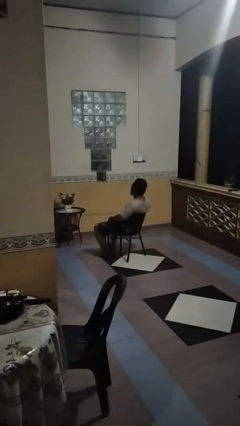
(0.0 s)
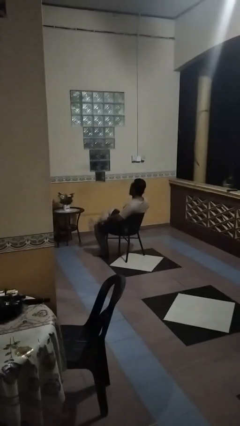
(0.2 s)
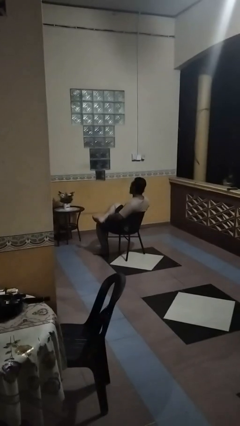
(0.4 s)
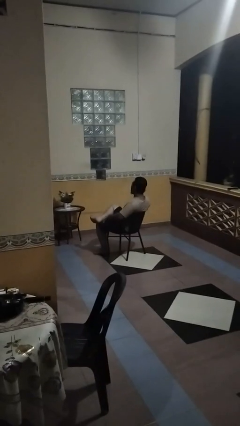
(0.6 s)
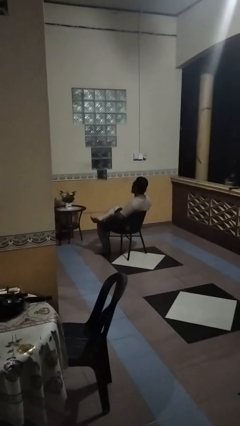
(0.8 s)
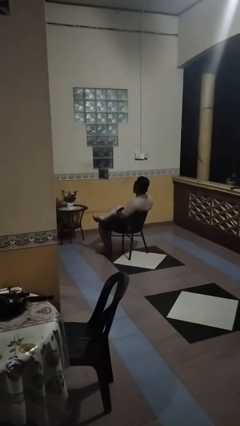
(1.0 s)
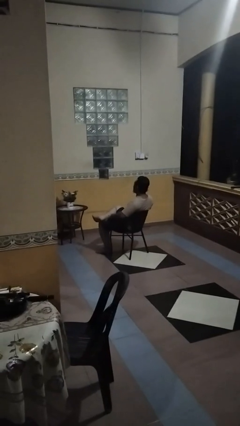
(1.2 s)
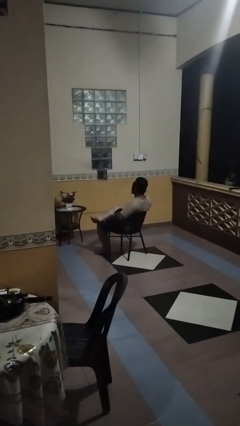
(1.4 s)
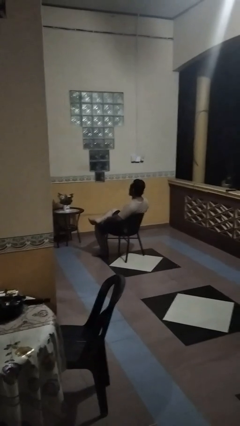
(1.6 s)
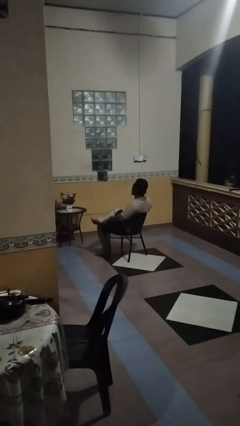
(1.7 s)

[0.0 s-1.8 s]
person crosses legs

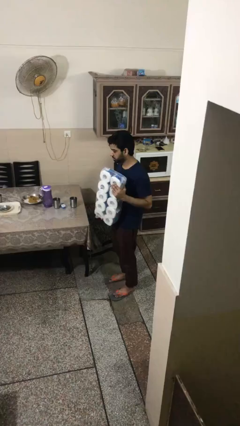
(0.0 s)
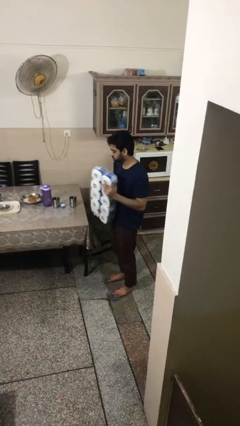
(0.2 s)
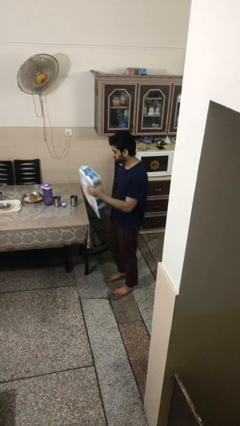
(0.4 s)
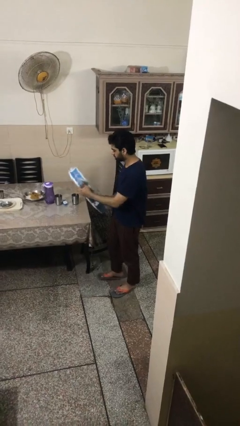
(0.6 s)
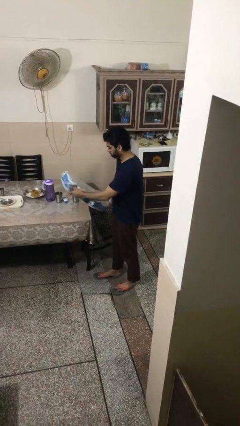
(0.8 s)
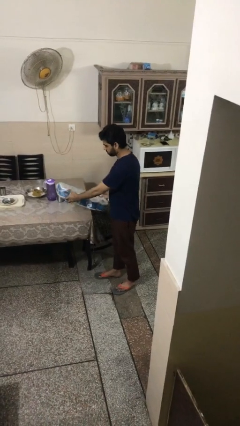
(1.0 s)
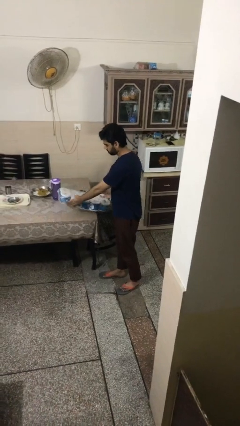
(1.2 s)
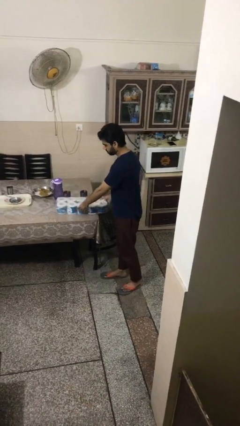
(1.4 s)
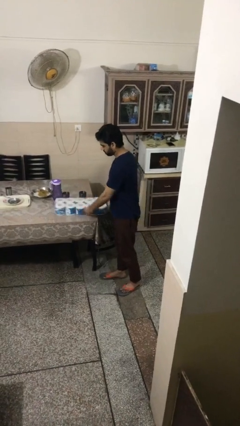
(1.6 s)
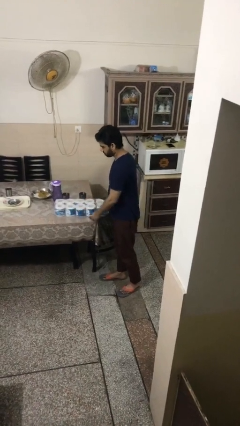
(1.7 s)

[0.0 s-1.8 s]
person puts down object on table

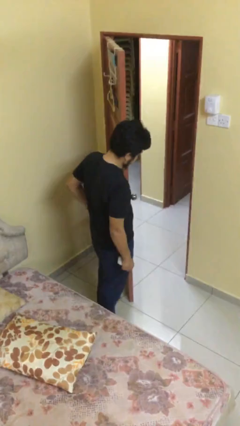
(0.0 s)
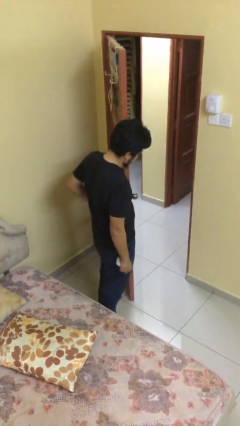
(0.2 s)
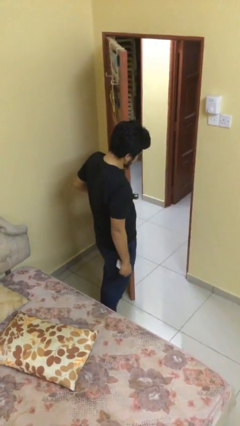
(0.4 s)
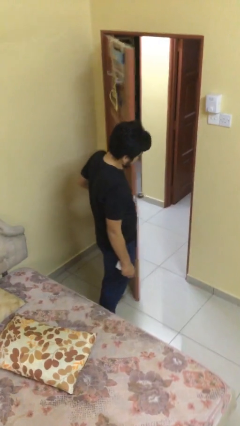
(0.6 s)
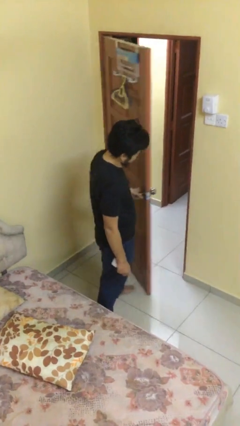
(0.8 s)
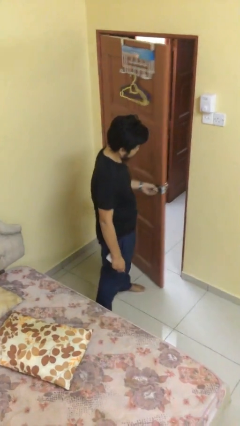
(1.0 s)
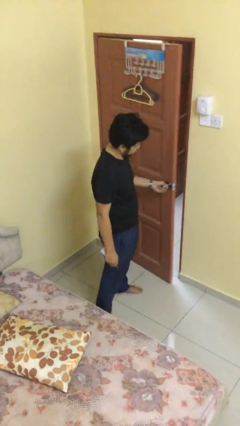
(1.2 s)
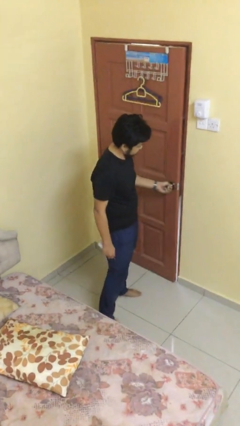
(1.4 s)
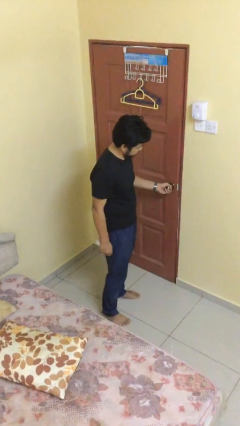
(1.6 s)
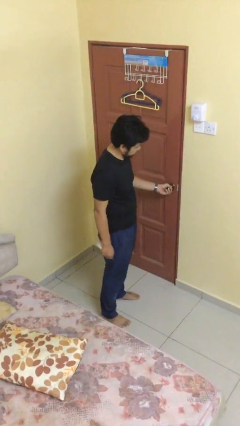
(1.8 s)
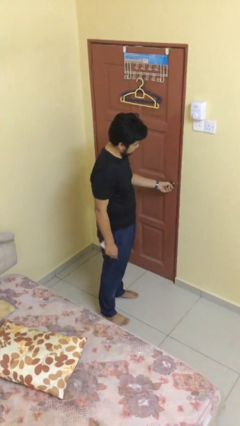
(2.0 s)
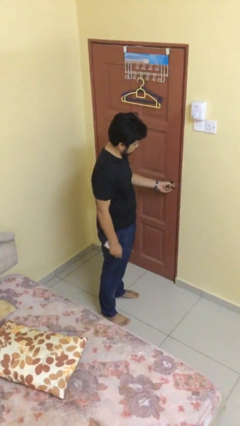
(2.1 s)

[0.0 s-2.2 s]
person closes facility door

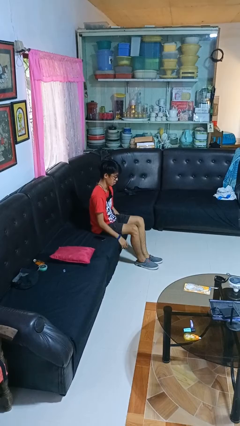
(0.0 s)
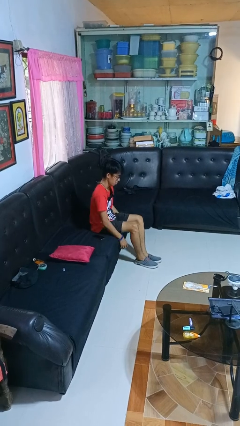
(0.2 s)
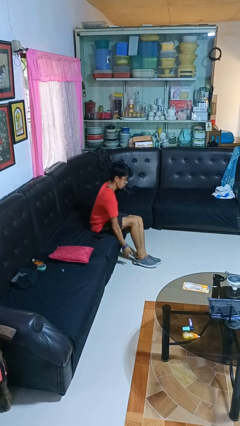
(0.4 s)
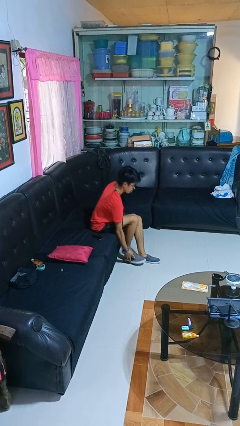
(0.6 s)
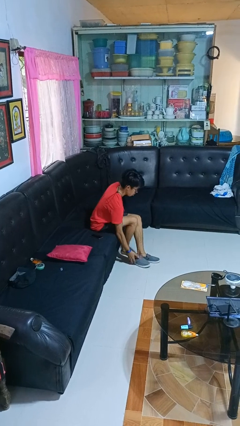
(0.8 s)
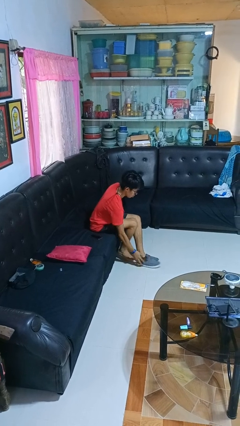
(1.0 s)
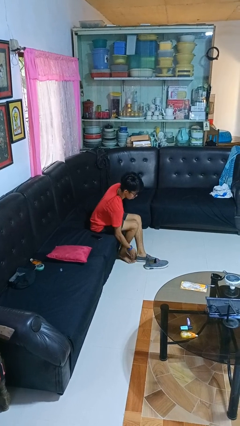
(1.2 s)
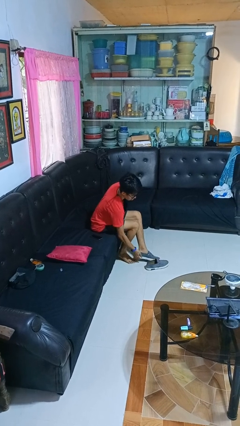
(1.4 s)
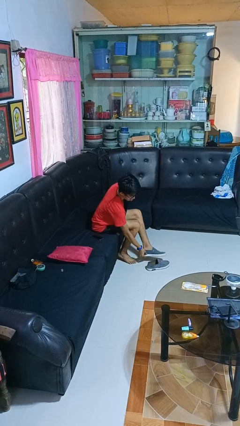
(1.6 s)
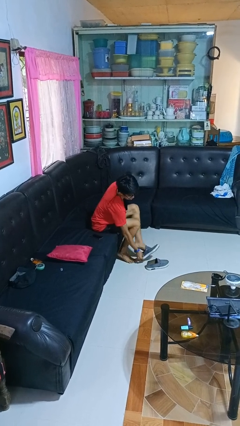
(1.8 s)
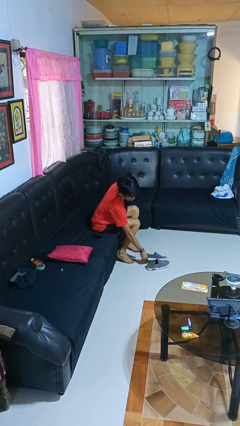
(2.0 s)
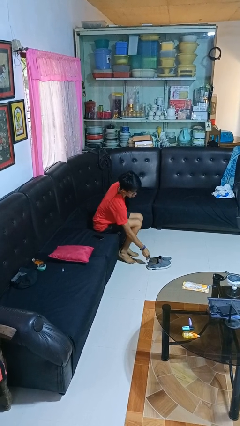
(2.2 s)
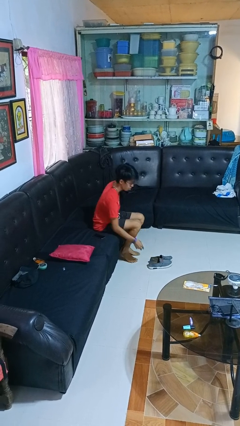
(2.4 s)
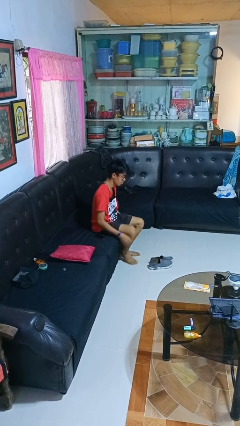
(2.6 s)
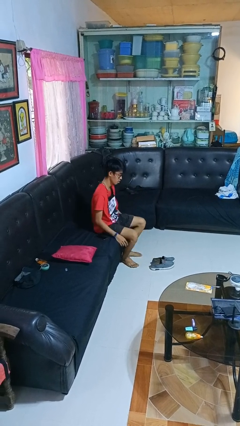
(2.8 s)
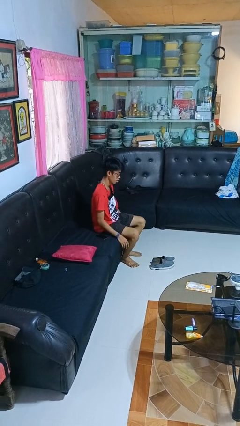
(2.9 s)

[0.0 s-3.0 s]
person takes off shoes

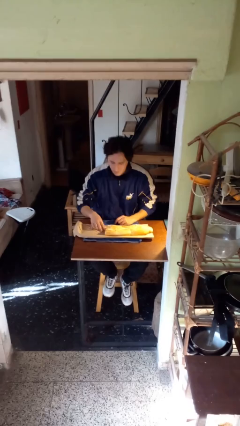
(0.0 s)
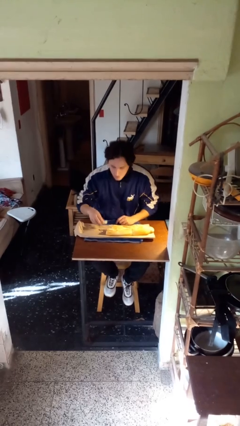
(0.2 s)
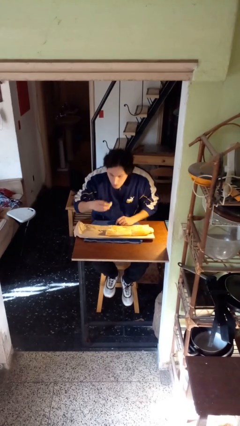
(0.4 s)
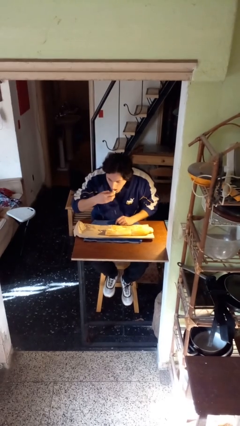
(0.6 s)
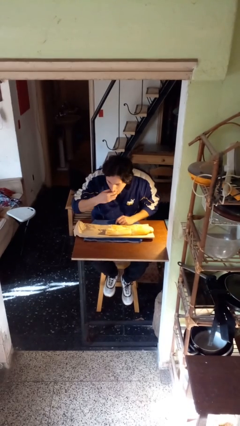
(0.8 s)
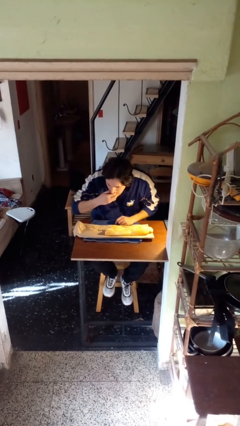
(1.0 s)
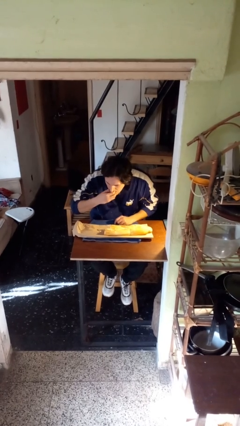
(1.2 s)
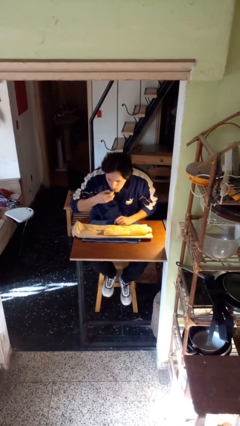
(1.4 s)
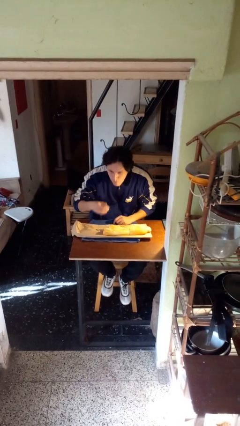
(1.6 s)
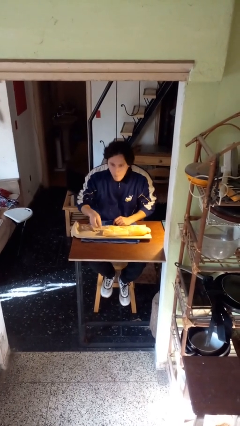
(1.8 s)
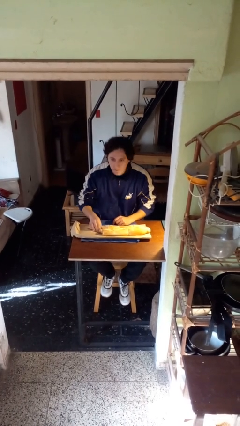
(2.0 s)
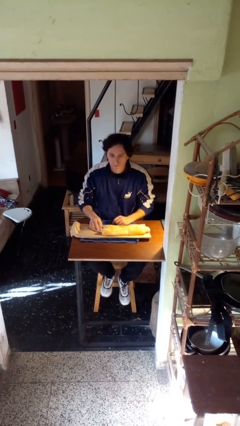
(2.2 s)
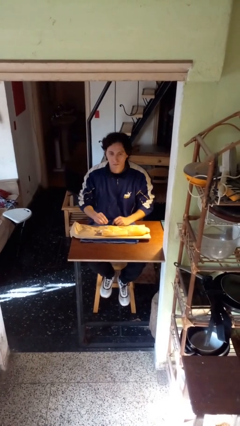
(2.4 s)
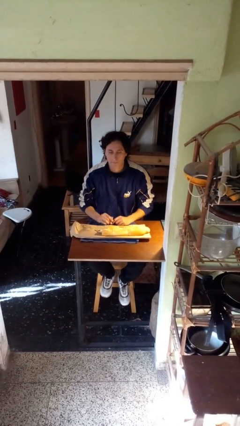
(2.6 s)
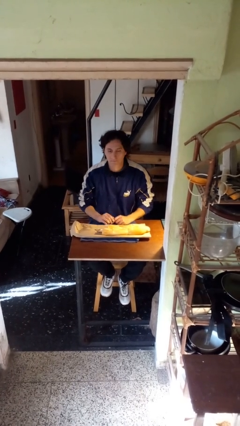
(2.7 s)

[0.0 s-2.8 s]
person eats with hands

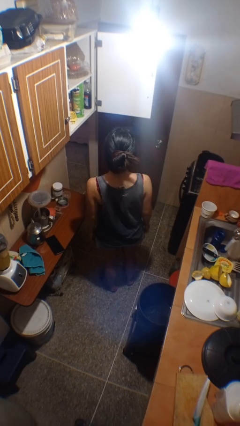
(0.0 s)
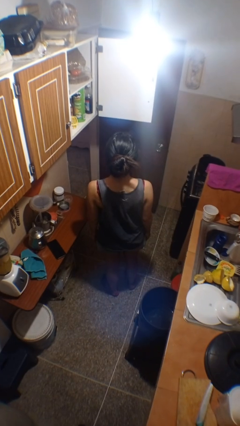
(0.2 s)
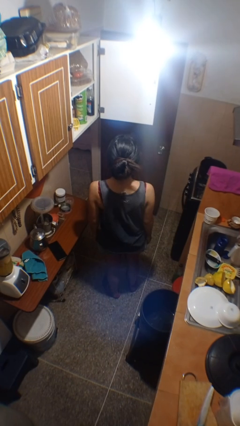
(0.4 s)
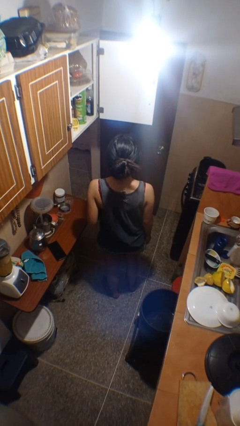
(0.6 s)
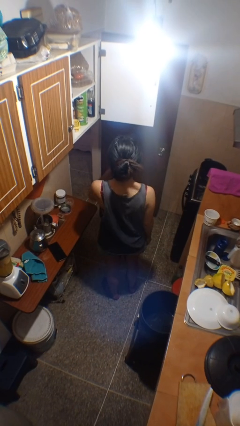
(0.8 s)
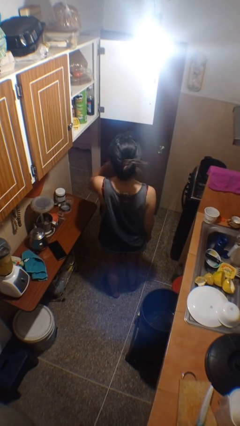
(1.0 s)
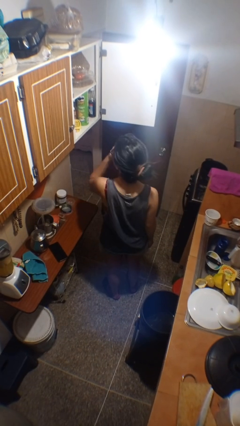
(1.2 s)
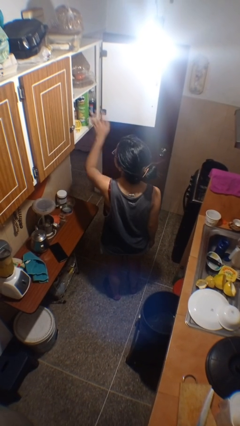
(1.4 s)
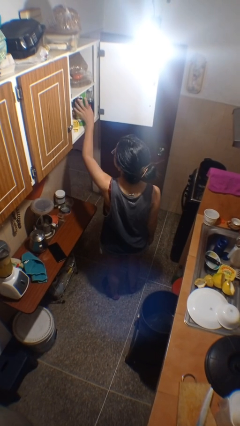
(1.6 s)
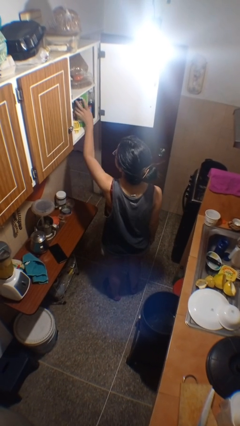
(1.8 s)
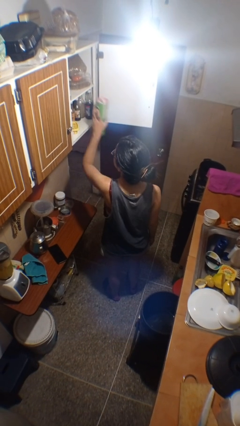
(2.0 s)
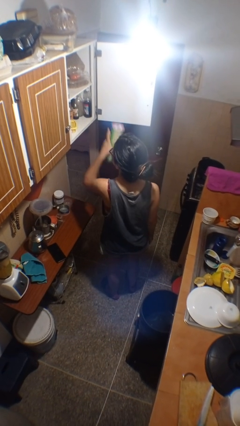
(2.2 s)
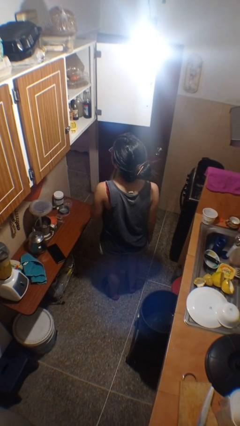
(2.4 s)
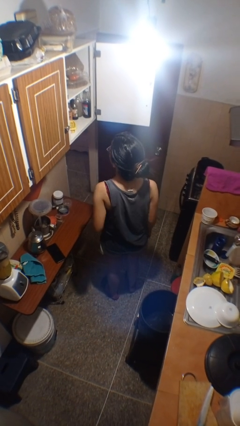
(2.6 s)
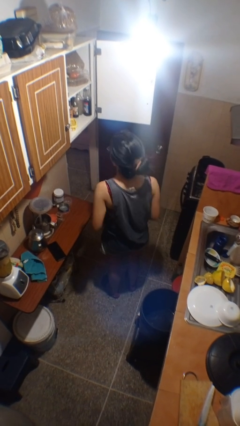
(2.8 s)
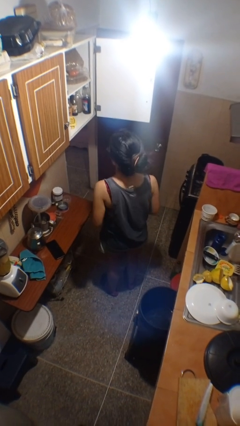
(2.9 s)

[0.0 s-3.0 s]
person takes object from cabinet

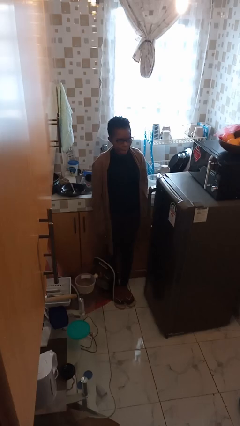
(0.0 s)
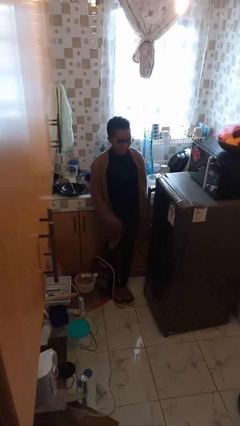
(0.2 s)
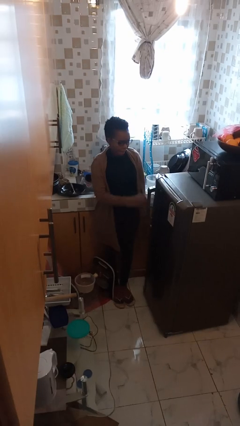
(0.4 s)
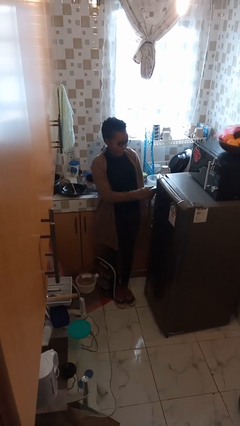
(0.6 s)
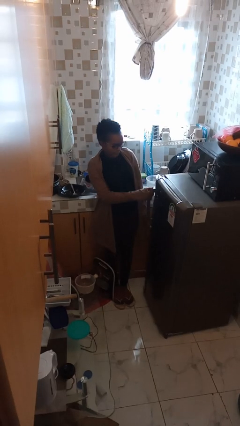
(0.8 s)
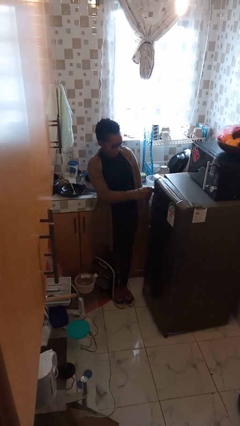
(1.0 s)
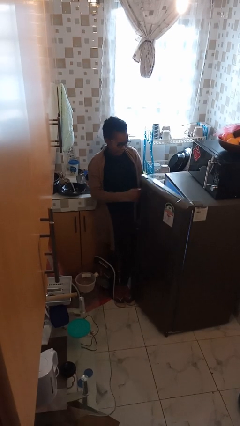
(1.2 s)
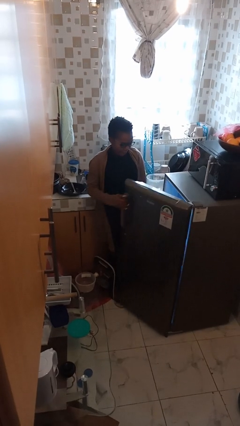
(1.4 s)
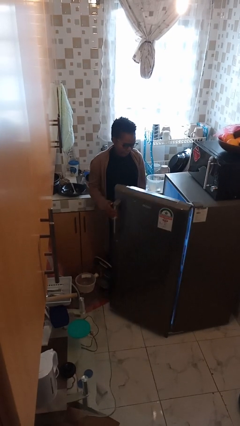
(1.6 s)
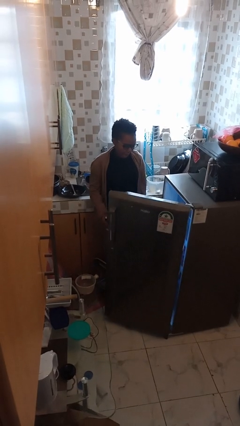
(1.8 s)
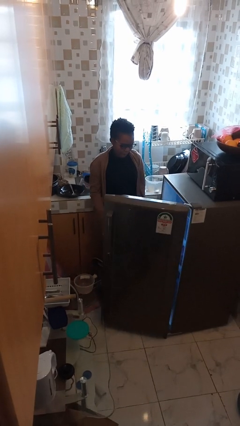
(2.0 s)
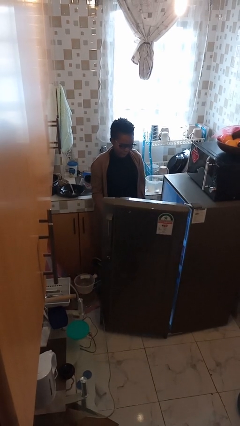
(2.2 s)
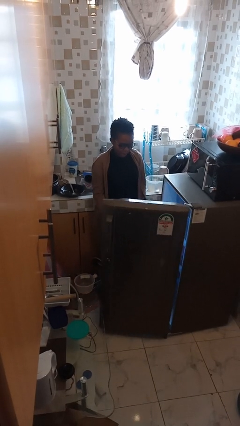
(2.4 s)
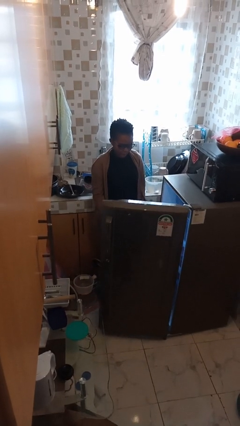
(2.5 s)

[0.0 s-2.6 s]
person opens refrigerator
